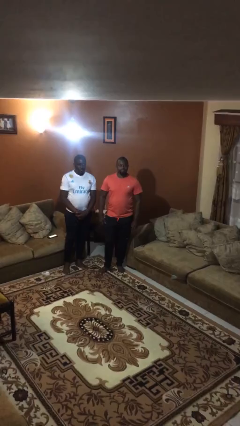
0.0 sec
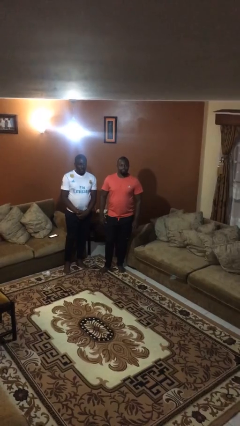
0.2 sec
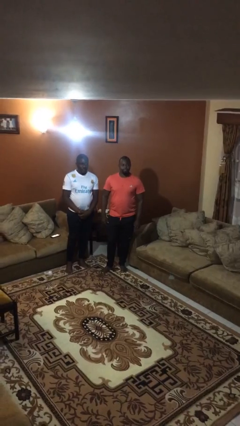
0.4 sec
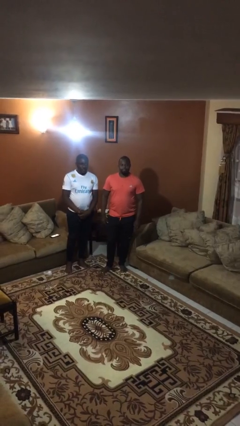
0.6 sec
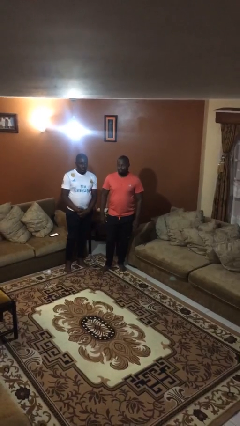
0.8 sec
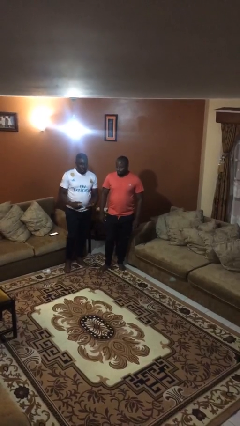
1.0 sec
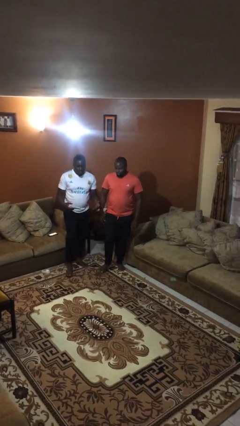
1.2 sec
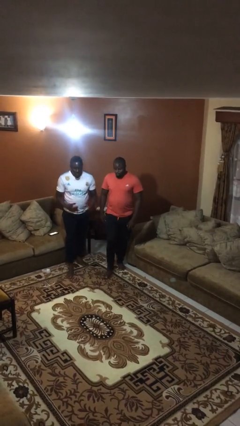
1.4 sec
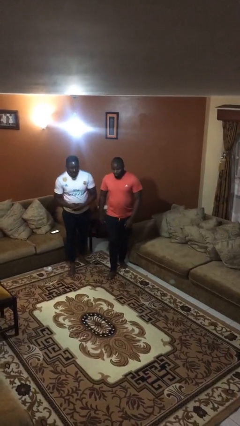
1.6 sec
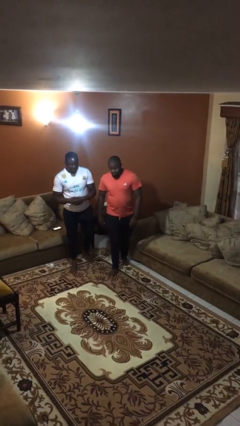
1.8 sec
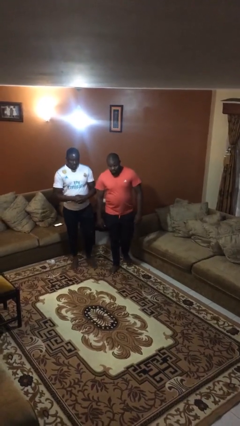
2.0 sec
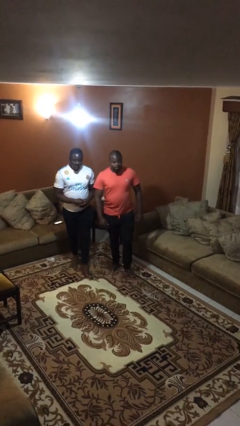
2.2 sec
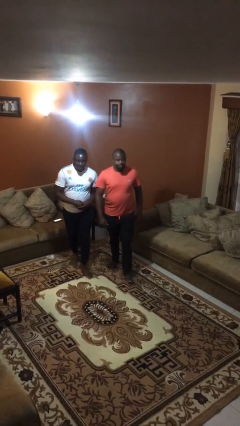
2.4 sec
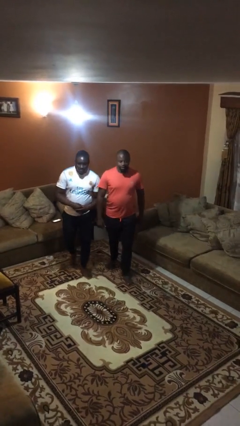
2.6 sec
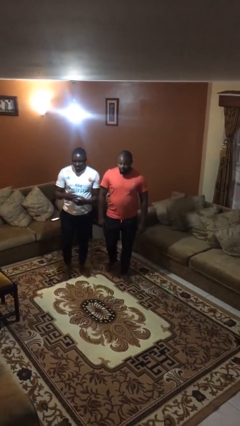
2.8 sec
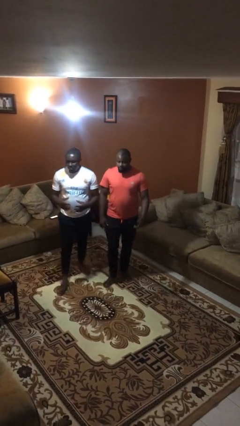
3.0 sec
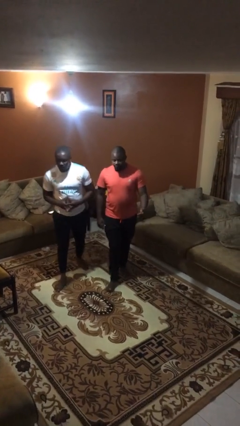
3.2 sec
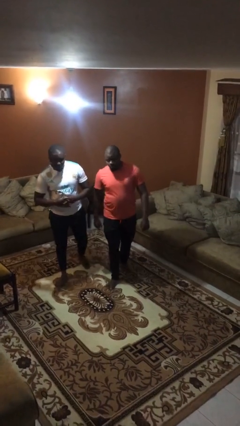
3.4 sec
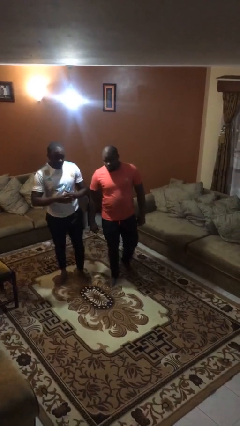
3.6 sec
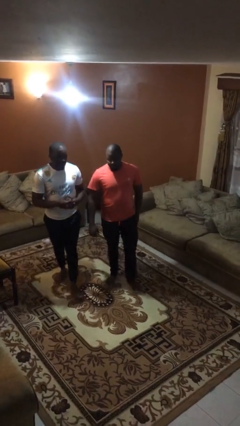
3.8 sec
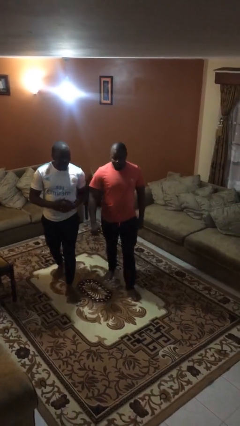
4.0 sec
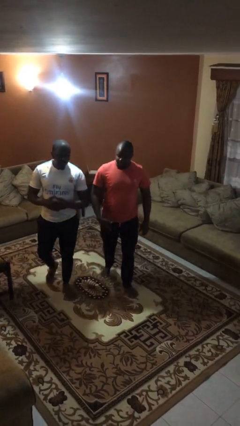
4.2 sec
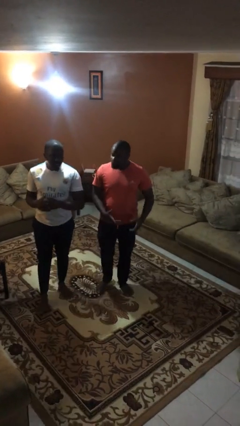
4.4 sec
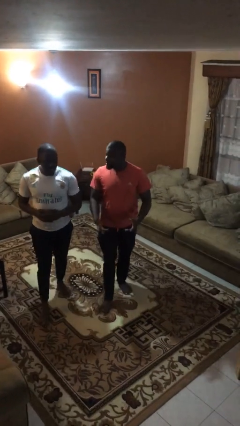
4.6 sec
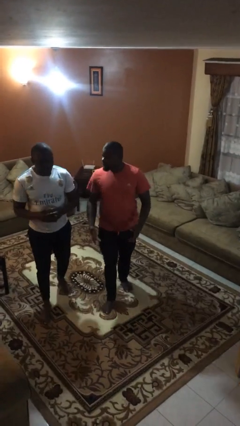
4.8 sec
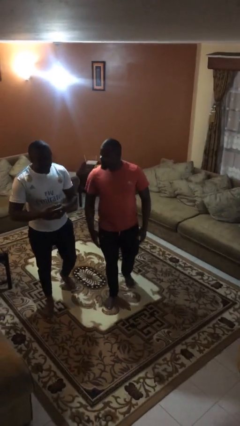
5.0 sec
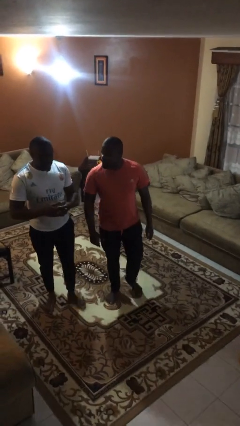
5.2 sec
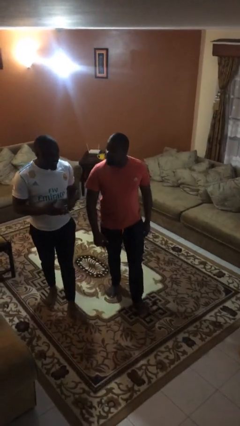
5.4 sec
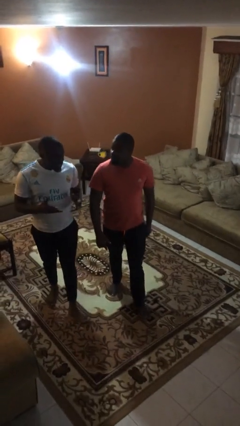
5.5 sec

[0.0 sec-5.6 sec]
person talks to person

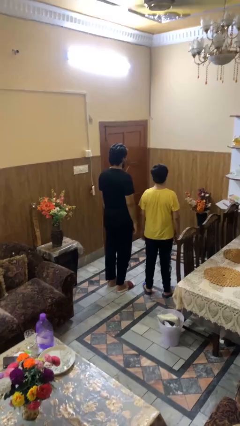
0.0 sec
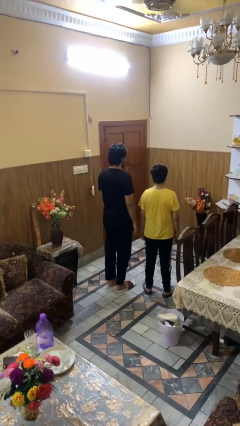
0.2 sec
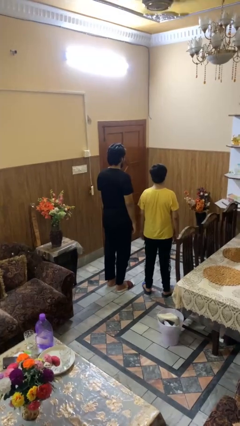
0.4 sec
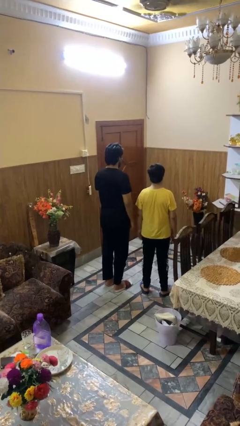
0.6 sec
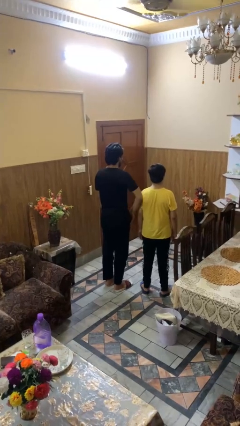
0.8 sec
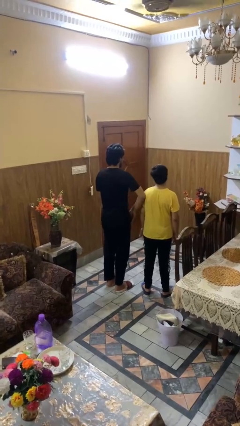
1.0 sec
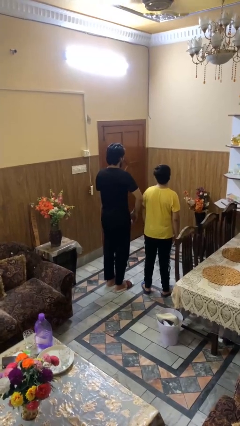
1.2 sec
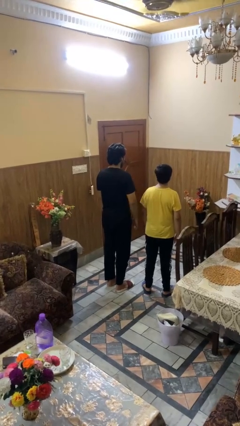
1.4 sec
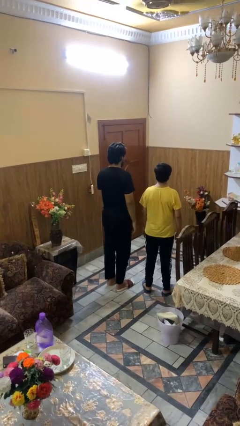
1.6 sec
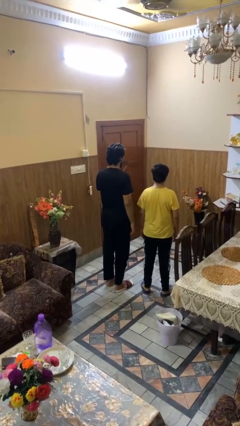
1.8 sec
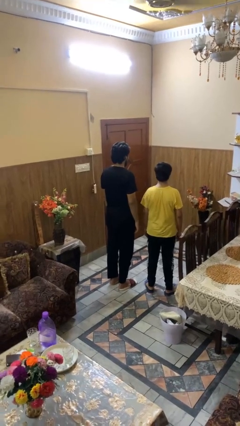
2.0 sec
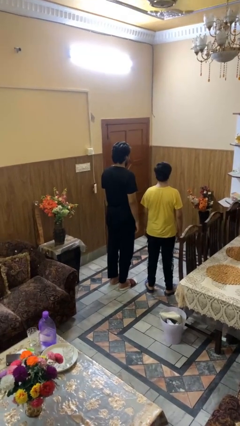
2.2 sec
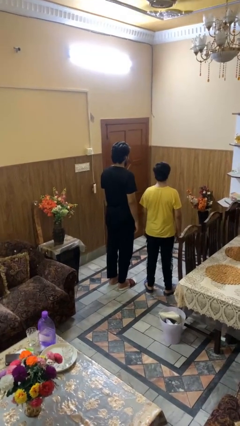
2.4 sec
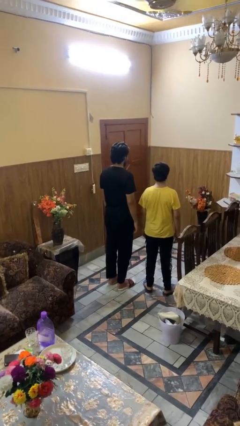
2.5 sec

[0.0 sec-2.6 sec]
person nudges person with elbow

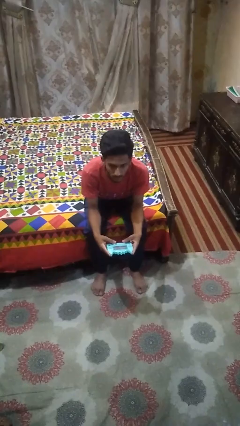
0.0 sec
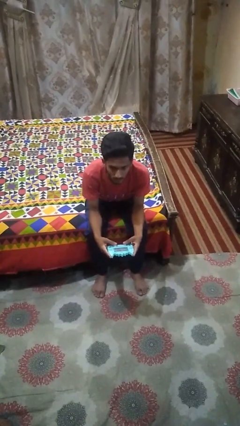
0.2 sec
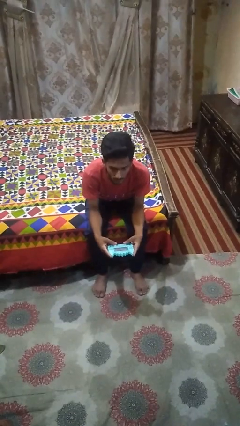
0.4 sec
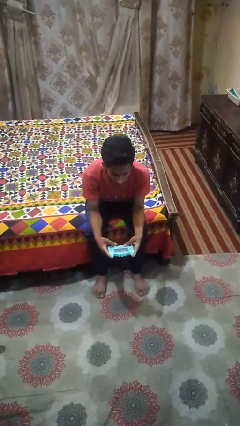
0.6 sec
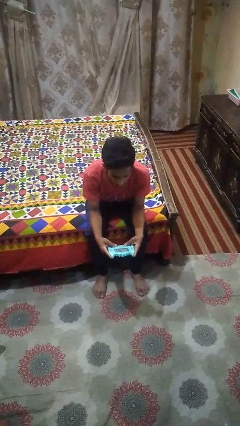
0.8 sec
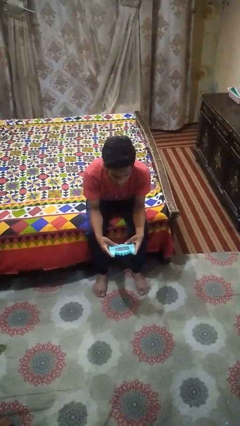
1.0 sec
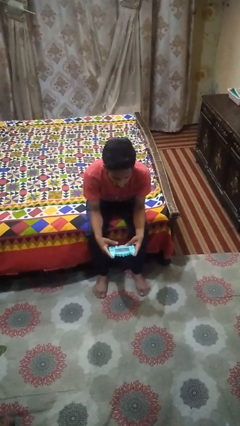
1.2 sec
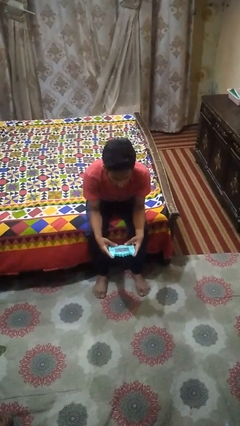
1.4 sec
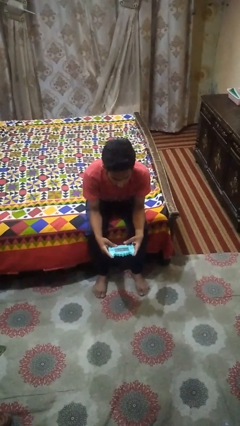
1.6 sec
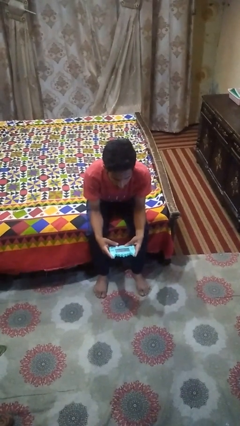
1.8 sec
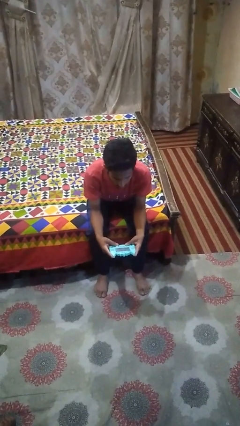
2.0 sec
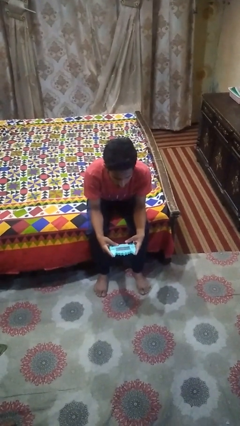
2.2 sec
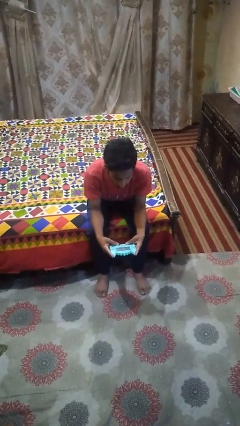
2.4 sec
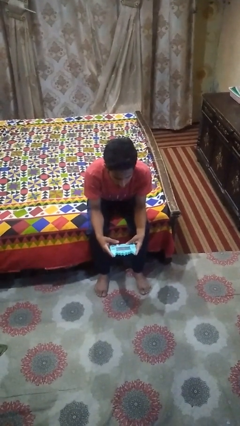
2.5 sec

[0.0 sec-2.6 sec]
person interacts with handheld game

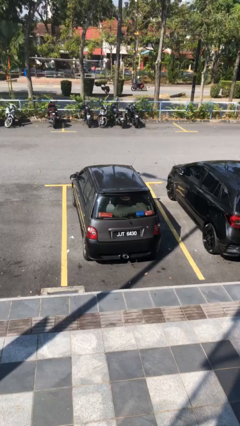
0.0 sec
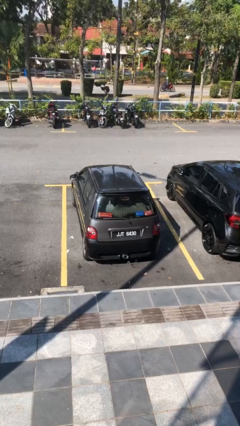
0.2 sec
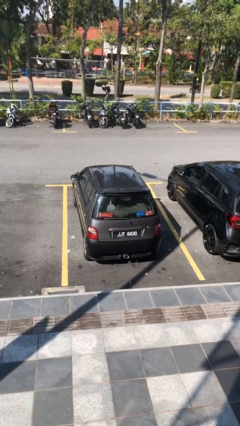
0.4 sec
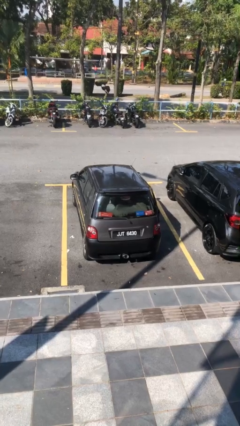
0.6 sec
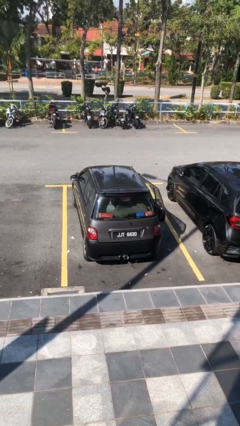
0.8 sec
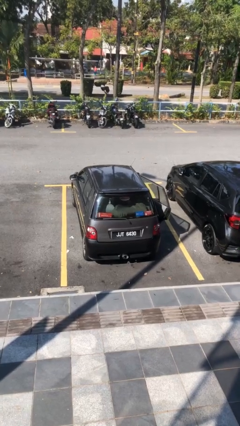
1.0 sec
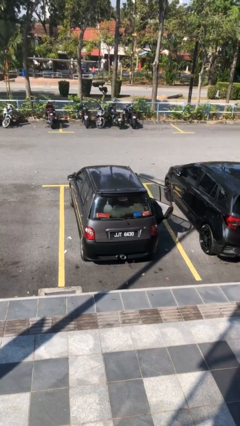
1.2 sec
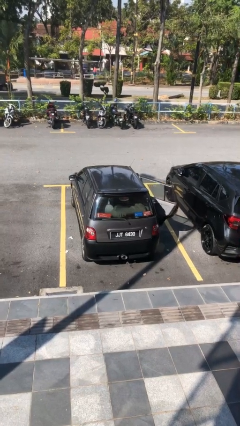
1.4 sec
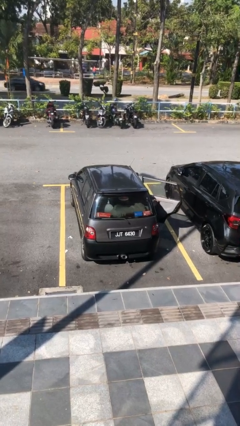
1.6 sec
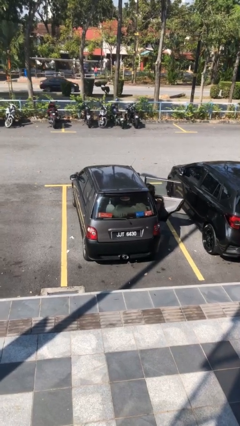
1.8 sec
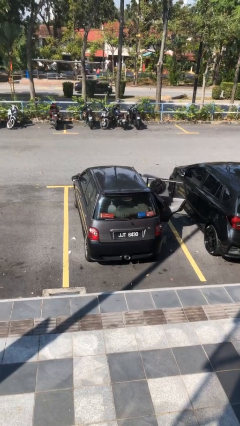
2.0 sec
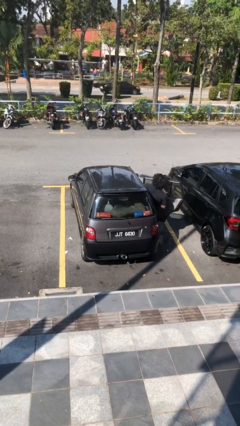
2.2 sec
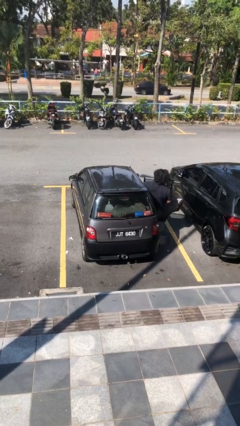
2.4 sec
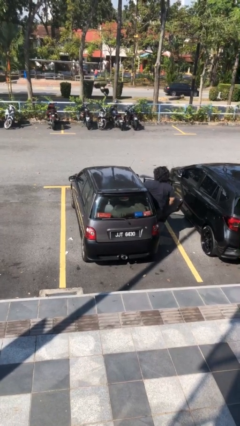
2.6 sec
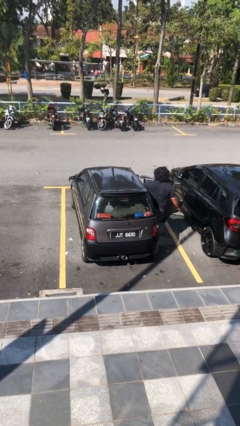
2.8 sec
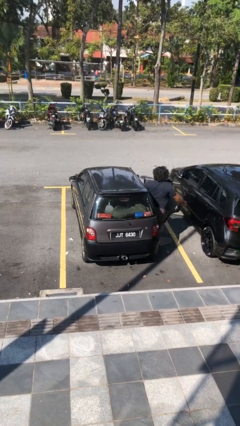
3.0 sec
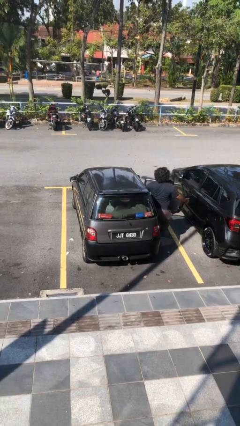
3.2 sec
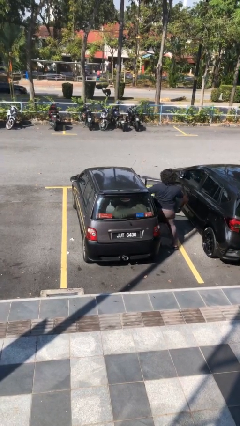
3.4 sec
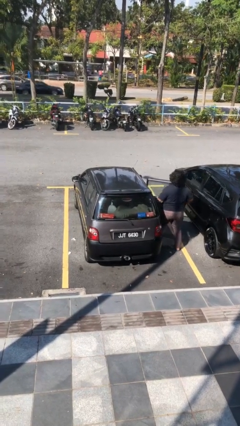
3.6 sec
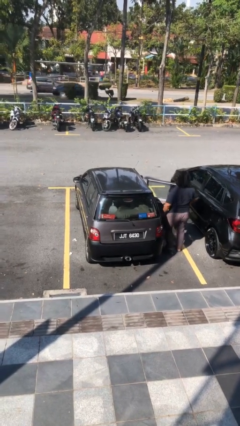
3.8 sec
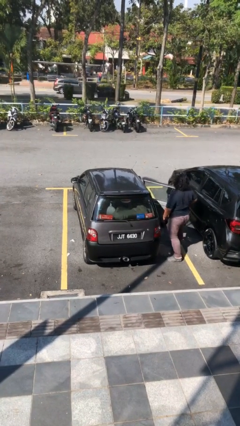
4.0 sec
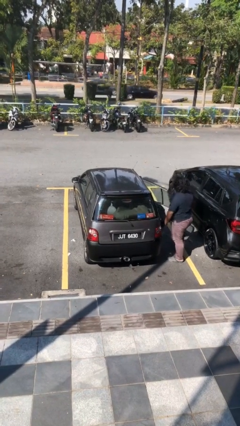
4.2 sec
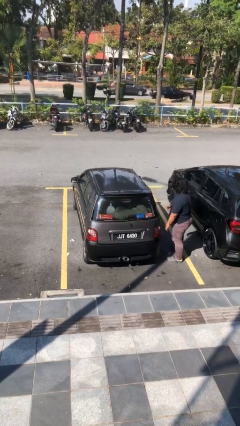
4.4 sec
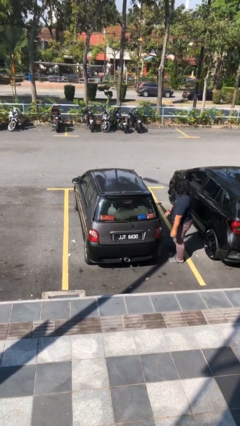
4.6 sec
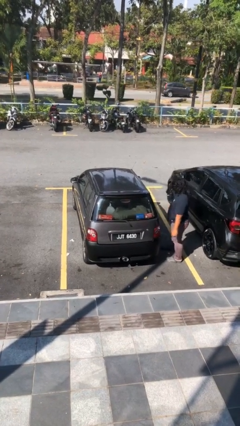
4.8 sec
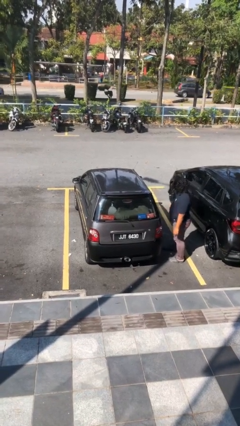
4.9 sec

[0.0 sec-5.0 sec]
car drops off person

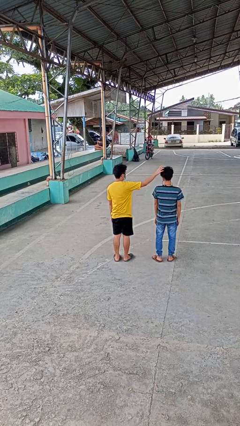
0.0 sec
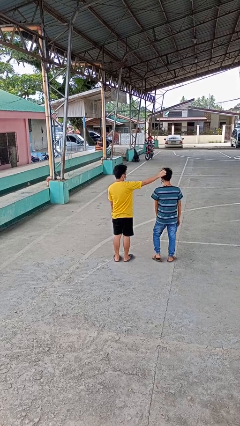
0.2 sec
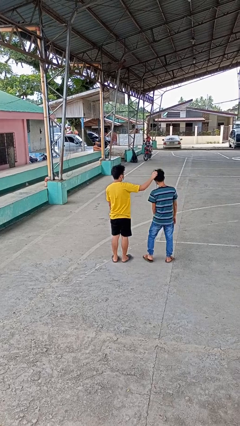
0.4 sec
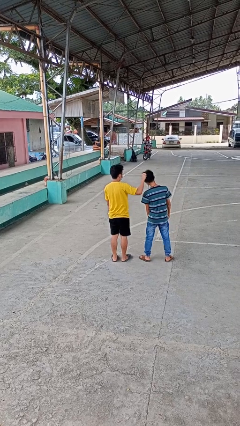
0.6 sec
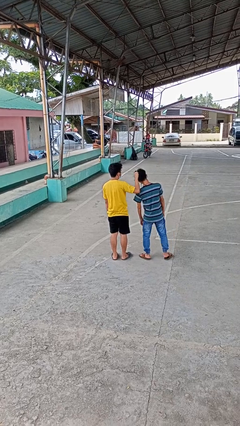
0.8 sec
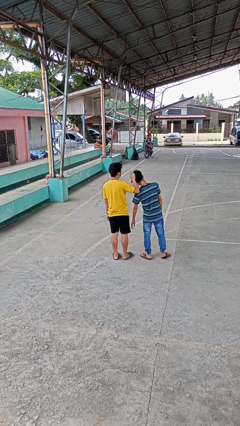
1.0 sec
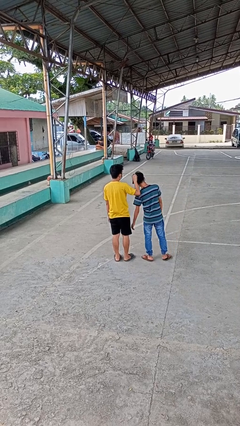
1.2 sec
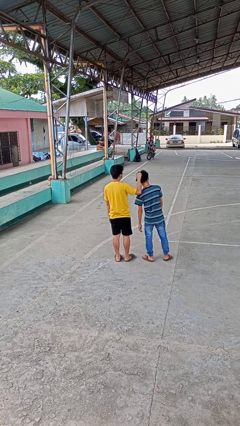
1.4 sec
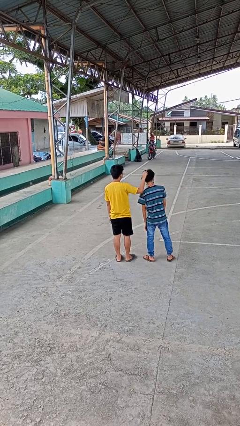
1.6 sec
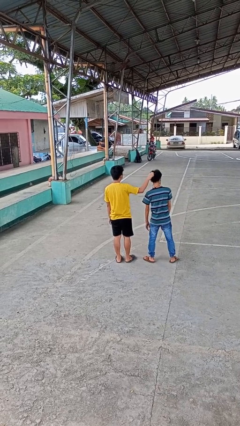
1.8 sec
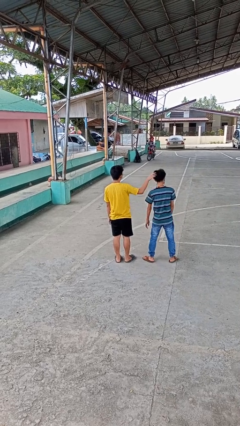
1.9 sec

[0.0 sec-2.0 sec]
person grabs person by hair
